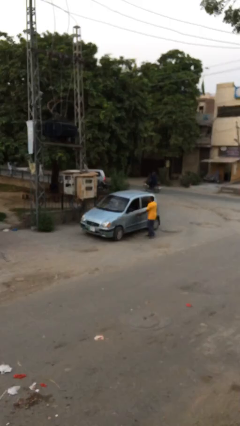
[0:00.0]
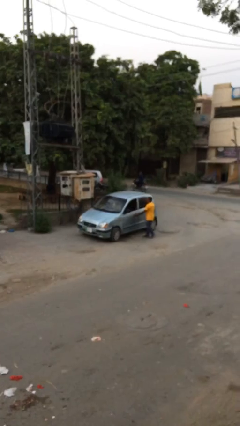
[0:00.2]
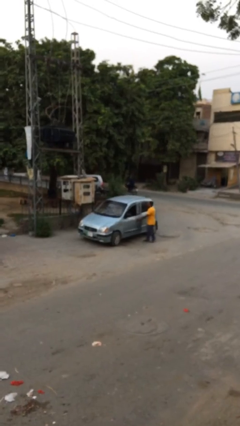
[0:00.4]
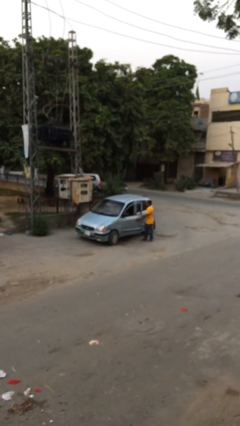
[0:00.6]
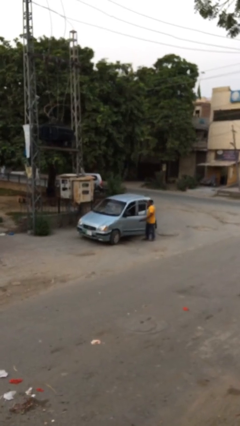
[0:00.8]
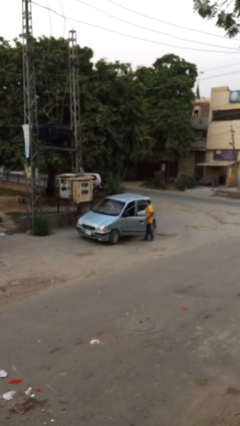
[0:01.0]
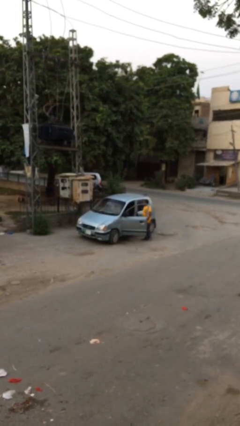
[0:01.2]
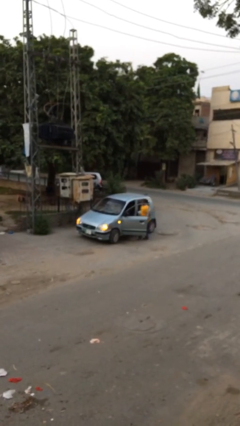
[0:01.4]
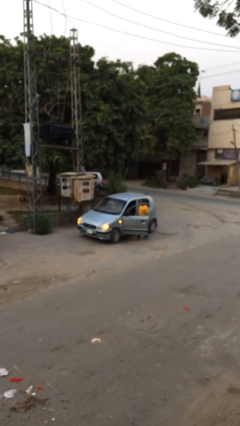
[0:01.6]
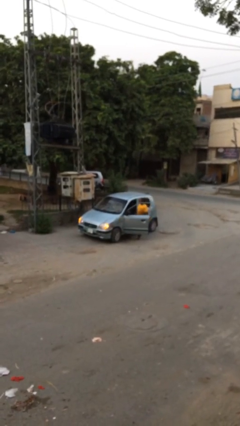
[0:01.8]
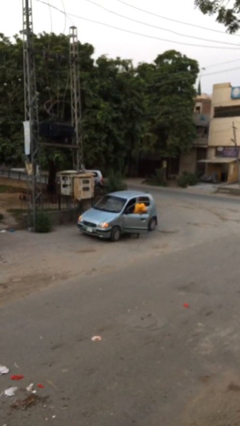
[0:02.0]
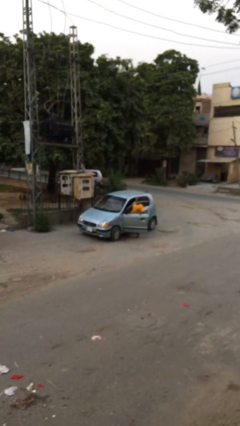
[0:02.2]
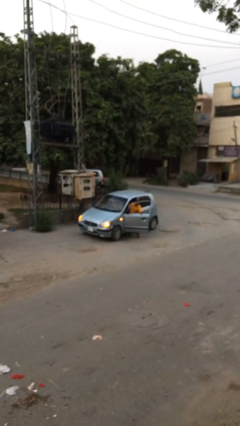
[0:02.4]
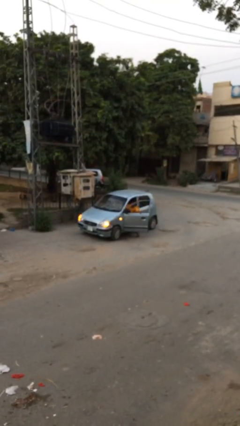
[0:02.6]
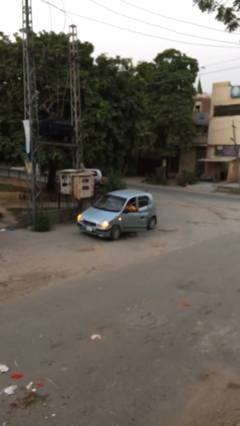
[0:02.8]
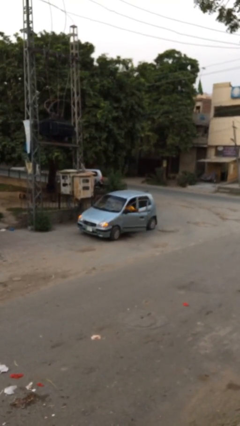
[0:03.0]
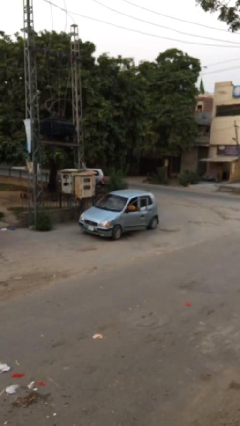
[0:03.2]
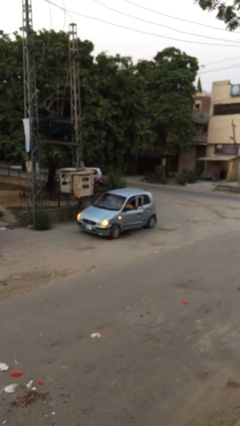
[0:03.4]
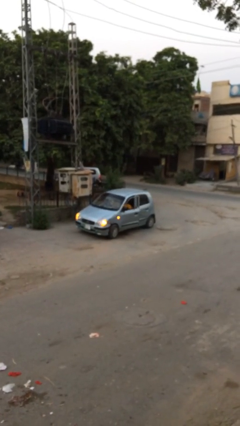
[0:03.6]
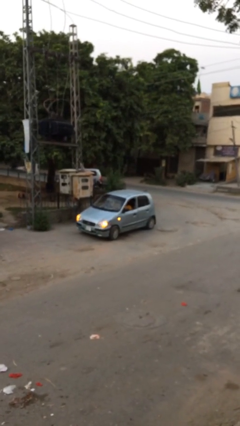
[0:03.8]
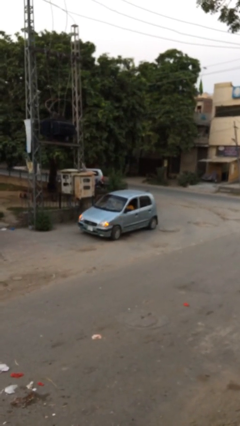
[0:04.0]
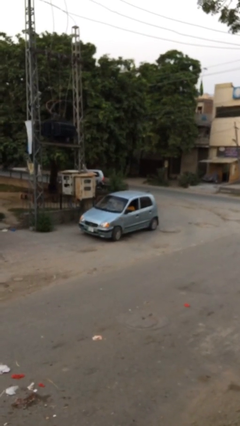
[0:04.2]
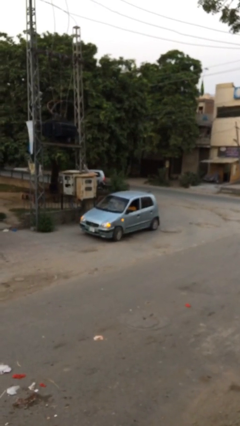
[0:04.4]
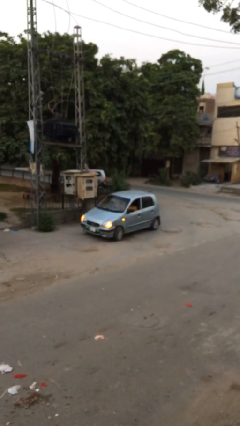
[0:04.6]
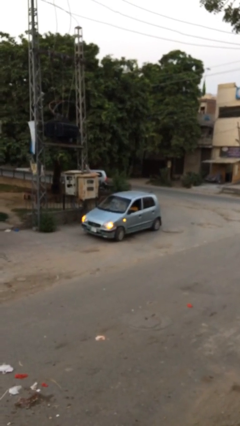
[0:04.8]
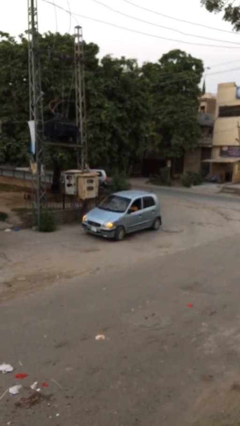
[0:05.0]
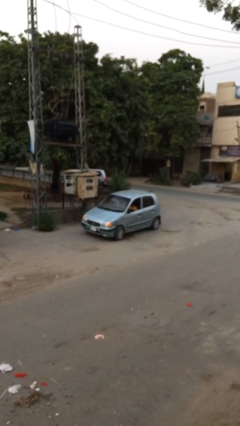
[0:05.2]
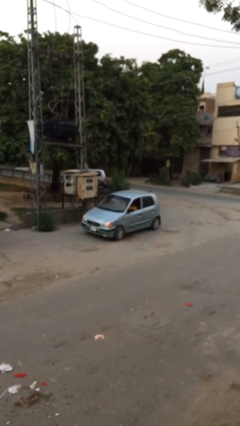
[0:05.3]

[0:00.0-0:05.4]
car picks up person

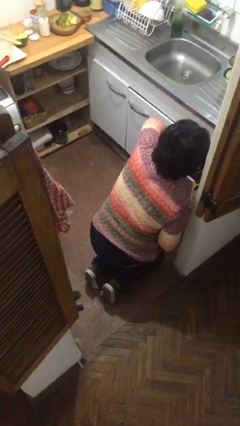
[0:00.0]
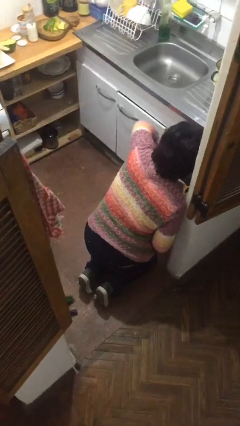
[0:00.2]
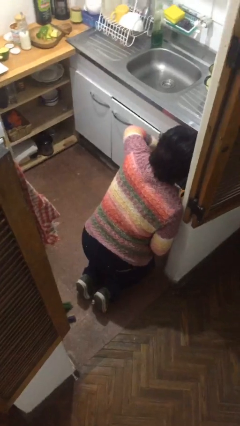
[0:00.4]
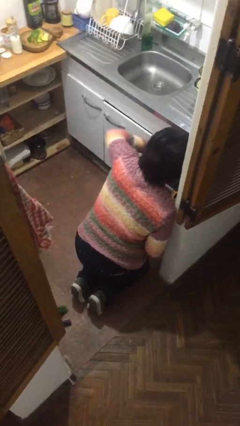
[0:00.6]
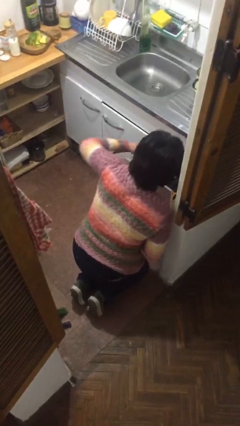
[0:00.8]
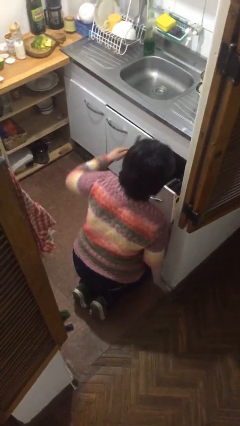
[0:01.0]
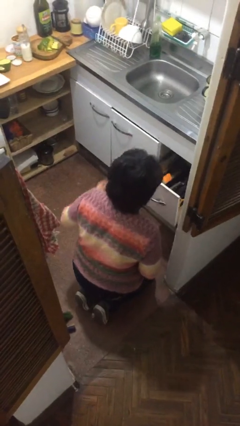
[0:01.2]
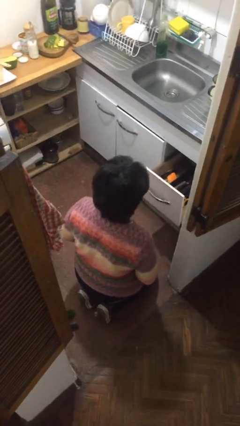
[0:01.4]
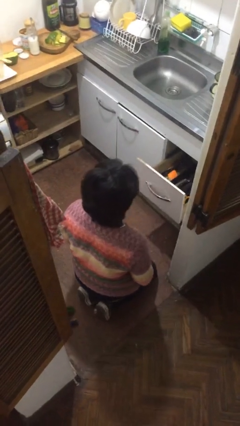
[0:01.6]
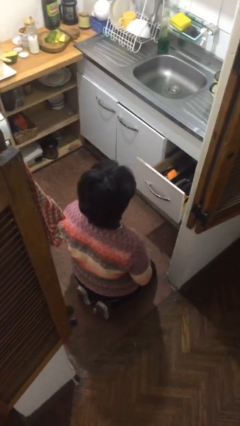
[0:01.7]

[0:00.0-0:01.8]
person takes object from kitchen drawer

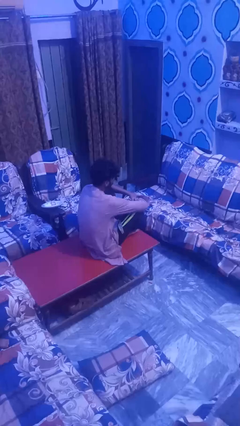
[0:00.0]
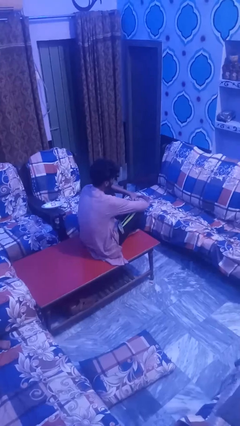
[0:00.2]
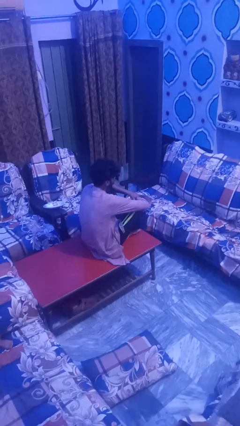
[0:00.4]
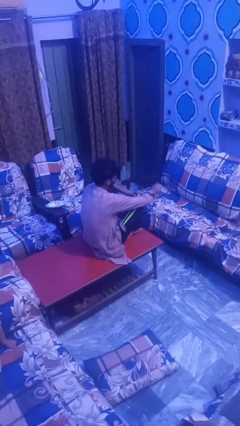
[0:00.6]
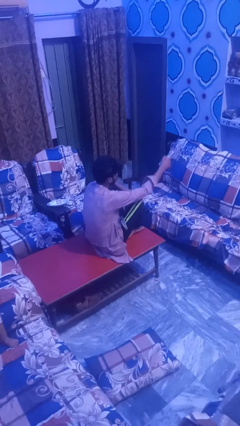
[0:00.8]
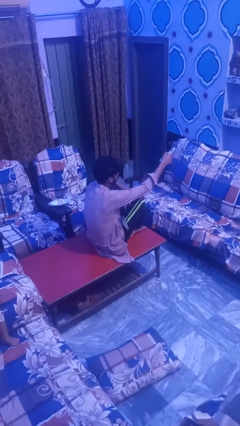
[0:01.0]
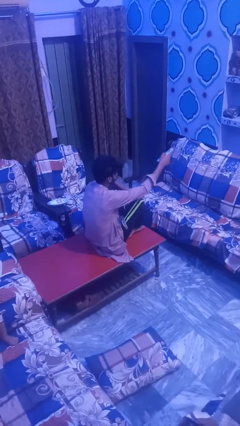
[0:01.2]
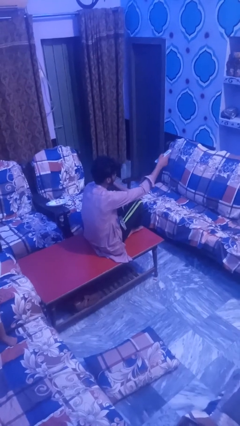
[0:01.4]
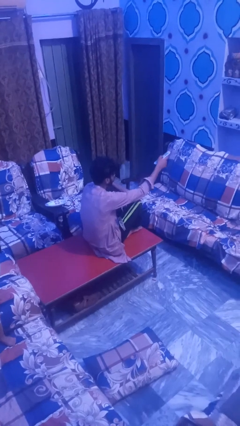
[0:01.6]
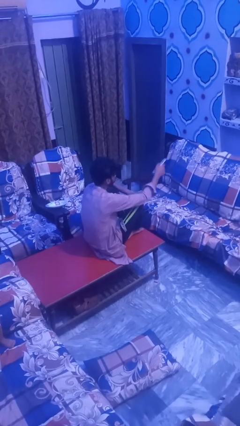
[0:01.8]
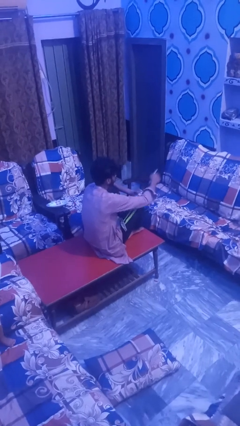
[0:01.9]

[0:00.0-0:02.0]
person uses television remote

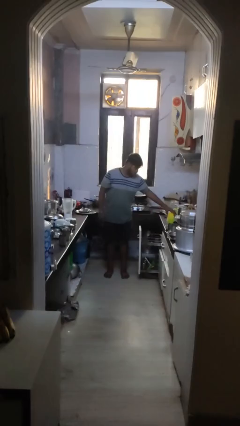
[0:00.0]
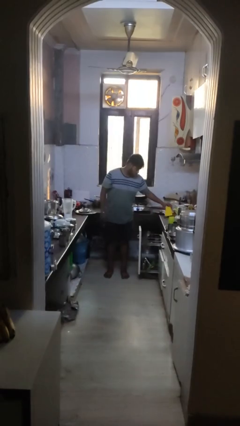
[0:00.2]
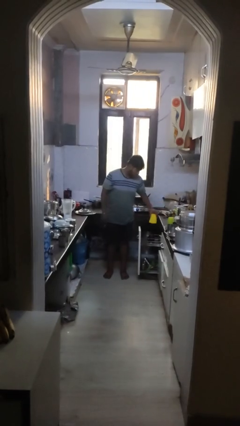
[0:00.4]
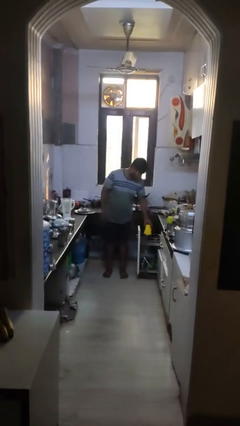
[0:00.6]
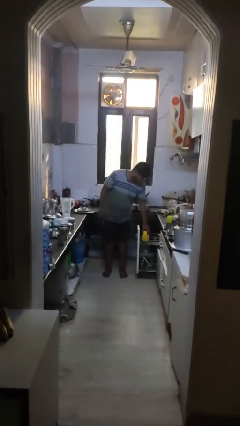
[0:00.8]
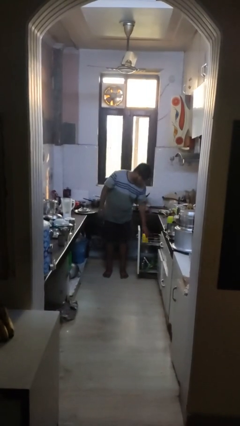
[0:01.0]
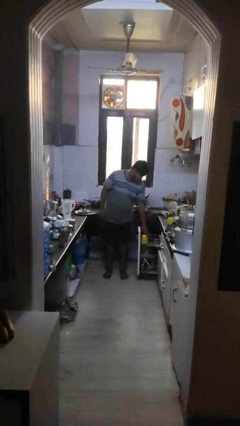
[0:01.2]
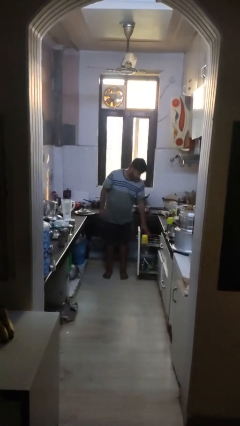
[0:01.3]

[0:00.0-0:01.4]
person loads dishwasher

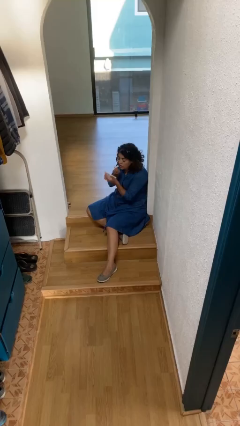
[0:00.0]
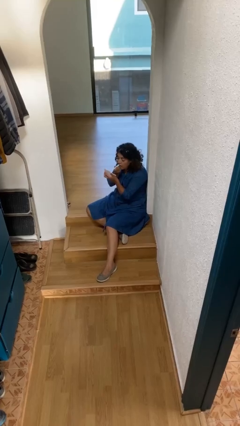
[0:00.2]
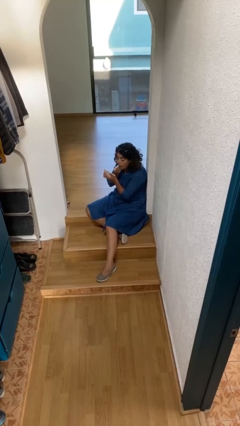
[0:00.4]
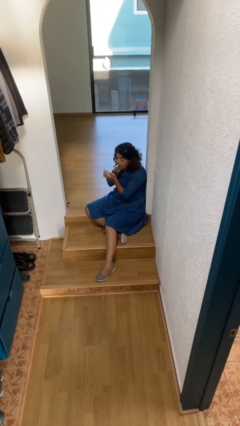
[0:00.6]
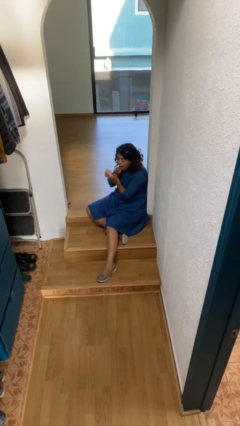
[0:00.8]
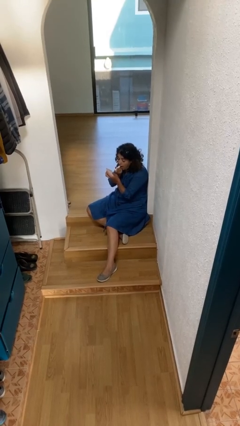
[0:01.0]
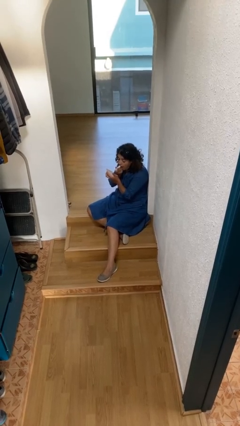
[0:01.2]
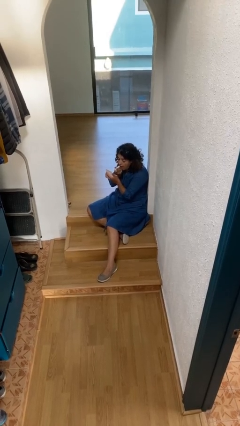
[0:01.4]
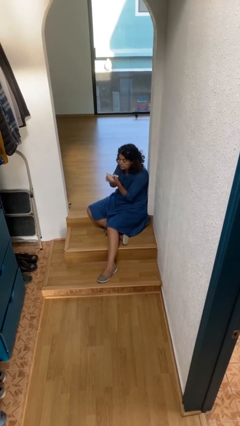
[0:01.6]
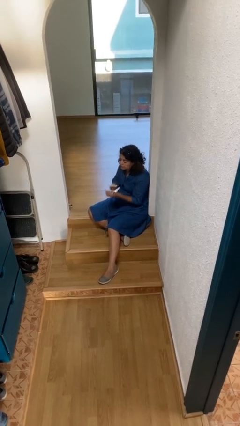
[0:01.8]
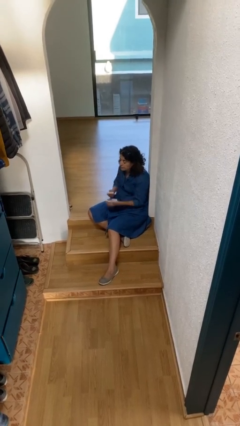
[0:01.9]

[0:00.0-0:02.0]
person applies lip makeup

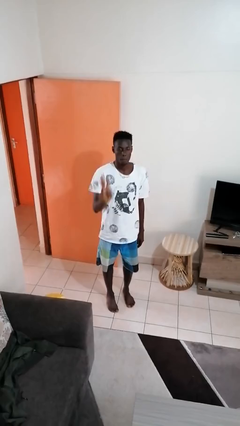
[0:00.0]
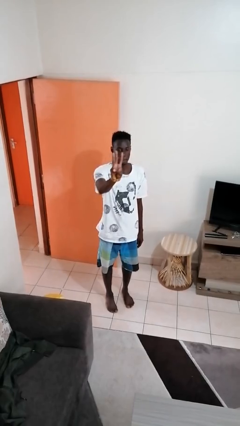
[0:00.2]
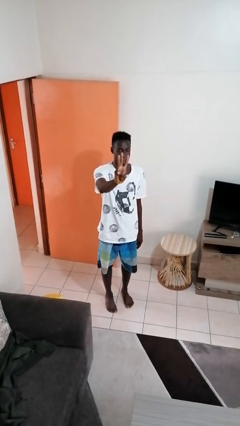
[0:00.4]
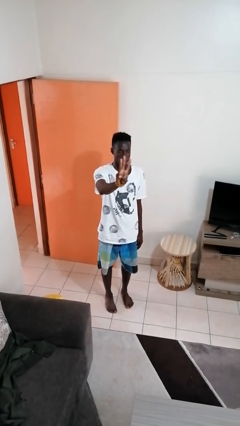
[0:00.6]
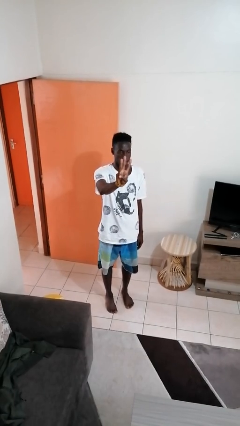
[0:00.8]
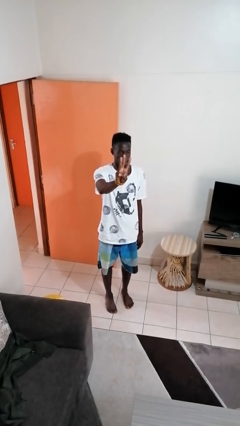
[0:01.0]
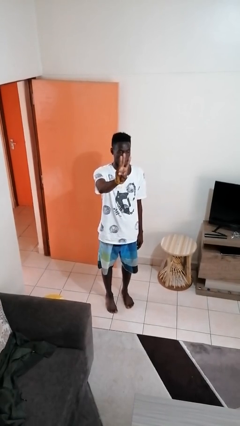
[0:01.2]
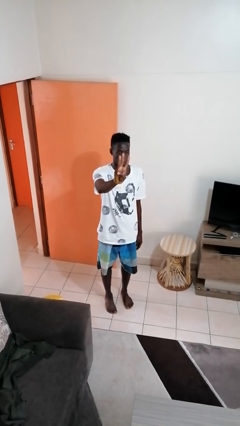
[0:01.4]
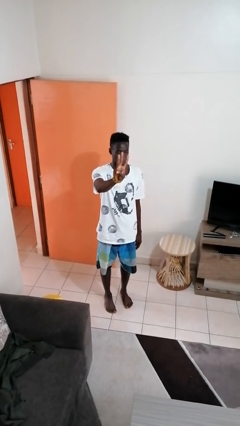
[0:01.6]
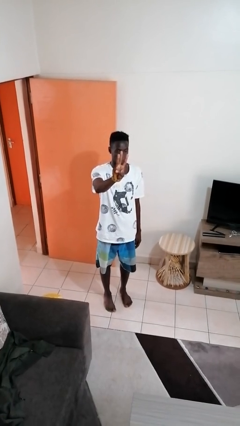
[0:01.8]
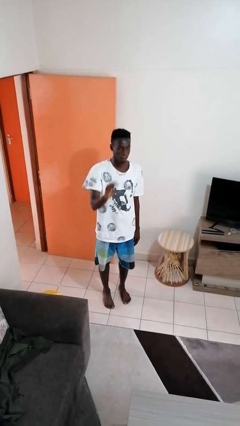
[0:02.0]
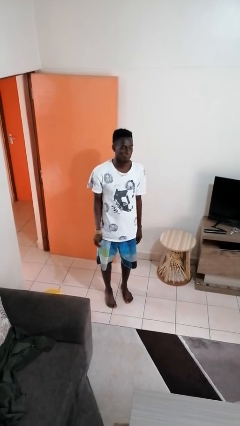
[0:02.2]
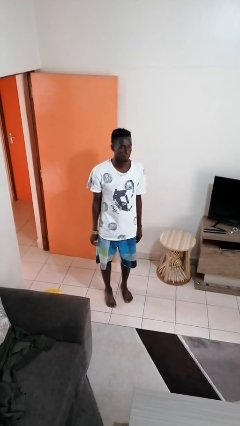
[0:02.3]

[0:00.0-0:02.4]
person gestures number three

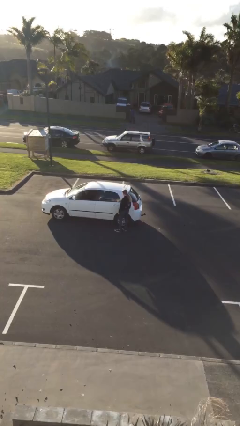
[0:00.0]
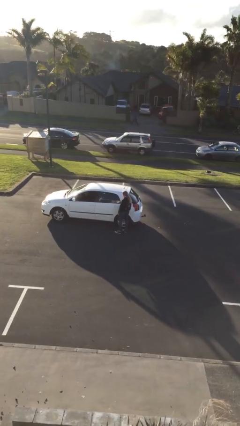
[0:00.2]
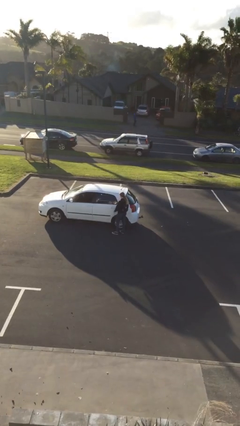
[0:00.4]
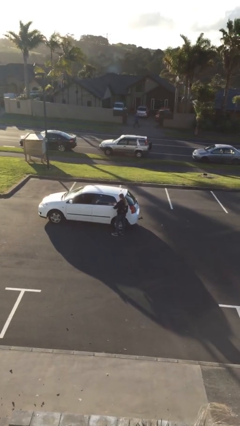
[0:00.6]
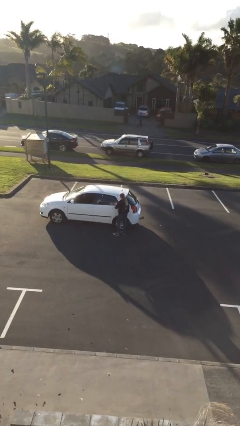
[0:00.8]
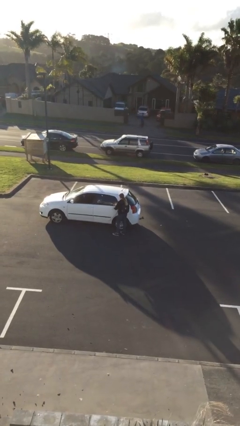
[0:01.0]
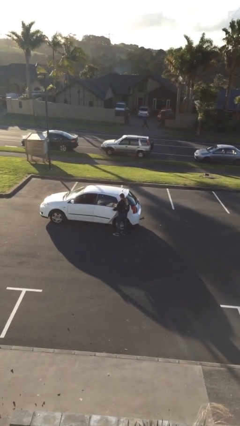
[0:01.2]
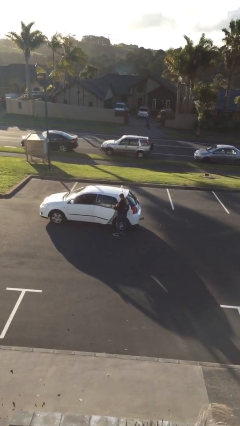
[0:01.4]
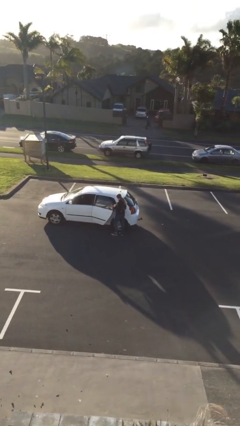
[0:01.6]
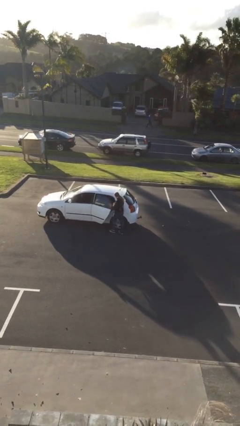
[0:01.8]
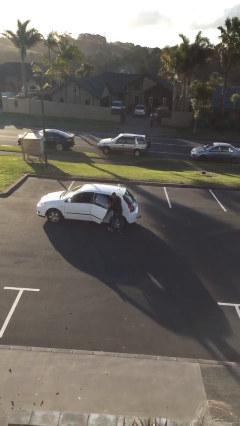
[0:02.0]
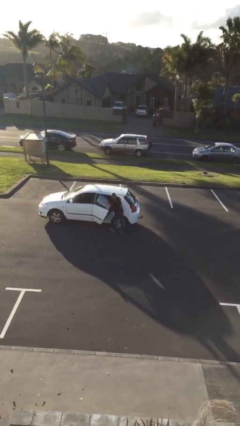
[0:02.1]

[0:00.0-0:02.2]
person opens car door

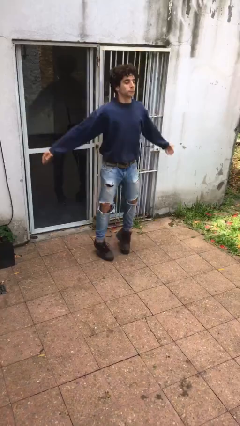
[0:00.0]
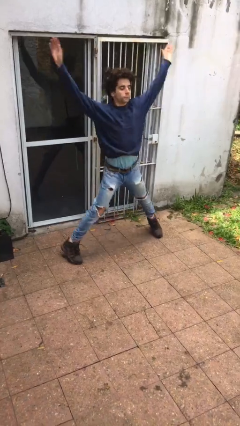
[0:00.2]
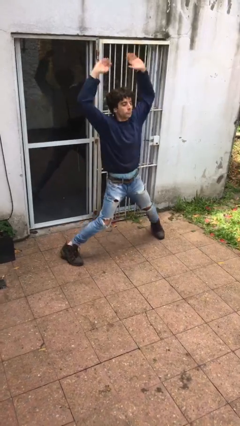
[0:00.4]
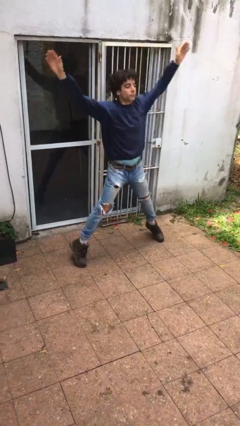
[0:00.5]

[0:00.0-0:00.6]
person exercises with jumping jacks
